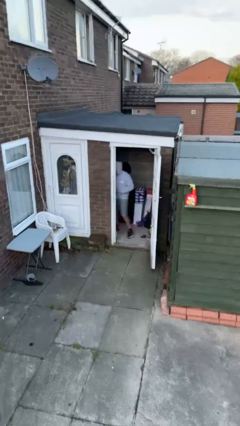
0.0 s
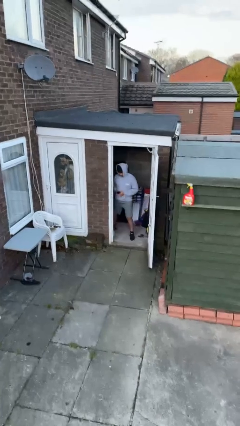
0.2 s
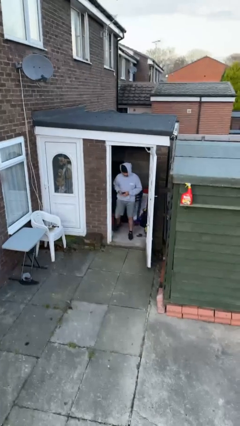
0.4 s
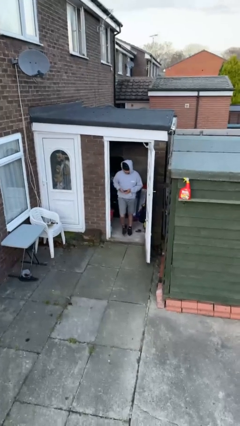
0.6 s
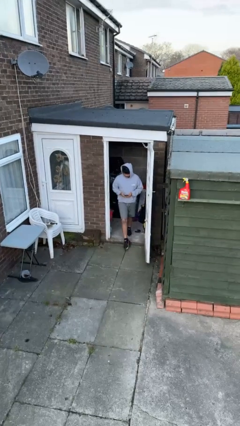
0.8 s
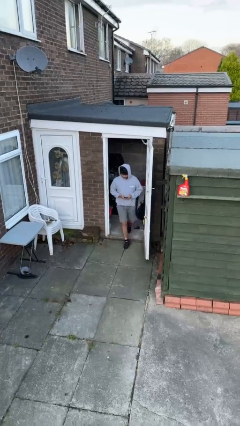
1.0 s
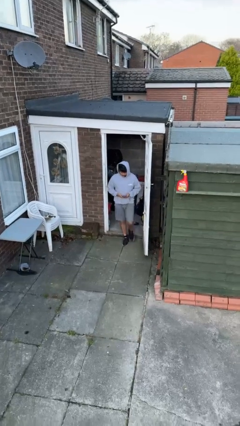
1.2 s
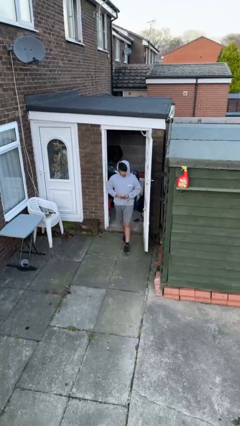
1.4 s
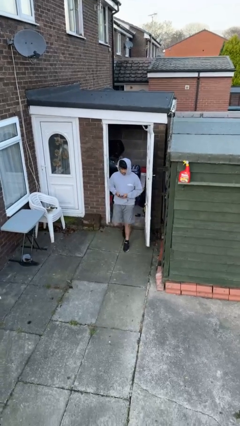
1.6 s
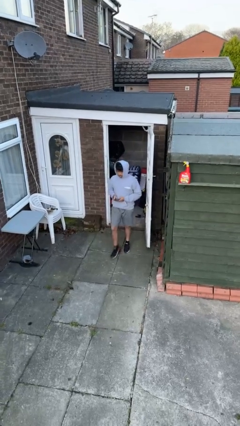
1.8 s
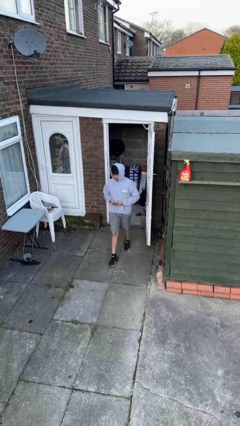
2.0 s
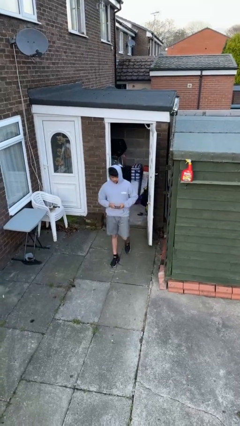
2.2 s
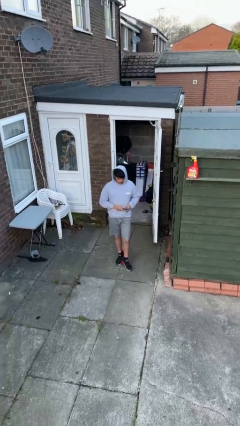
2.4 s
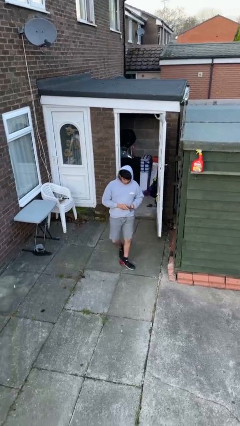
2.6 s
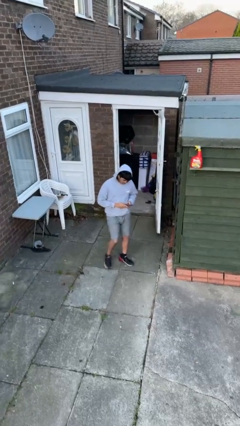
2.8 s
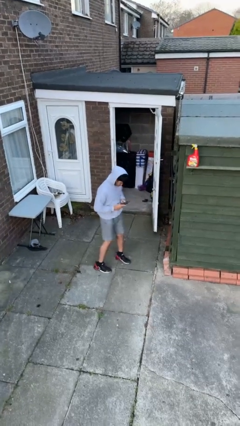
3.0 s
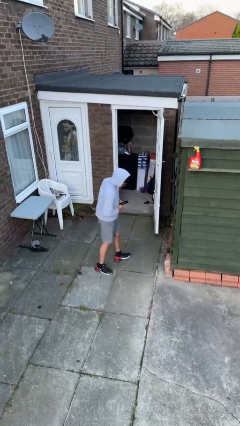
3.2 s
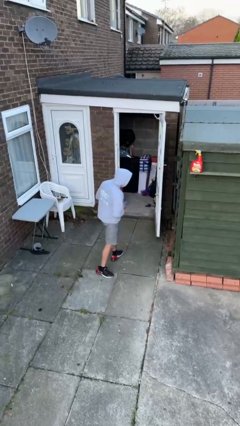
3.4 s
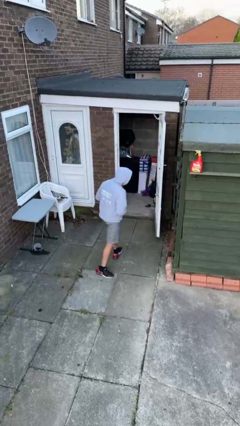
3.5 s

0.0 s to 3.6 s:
person enters scene through structure

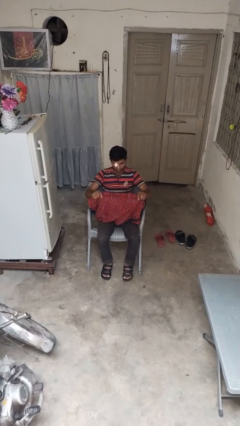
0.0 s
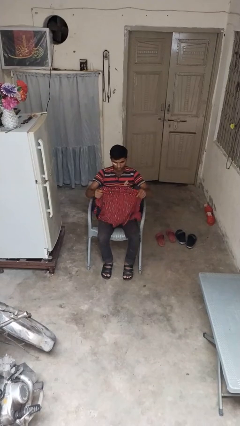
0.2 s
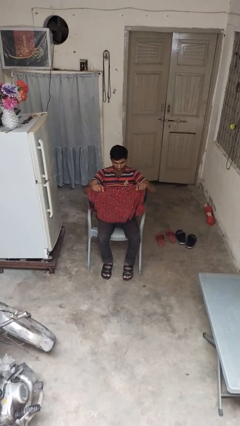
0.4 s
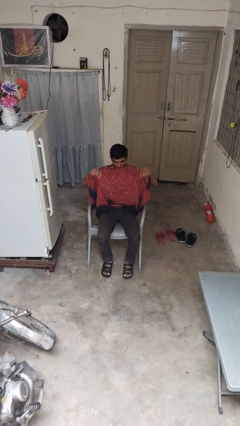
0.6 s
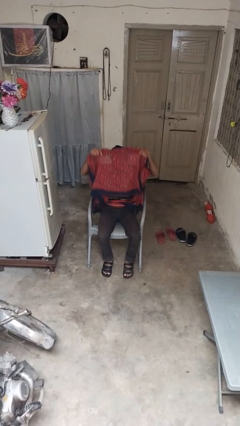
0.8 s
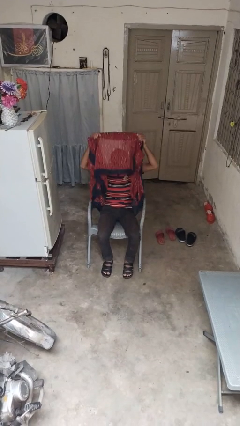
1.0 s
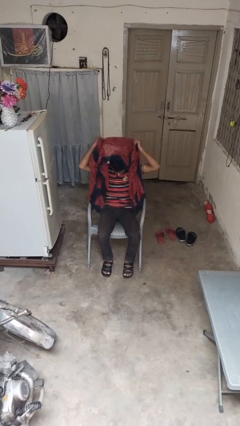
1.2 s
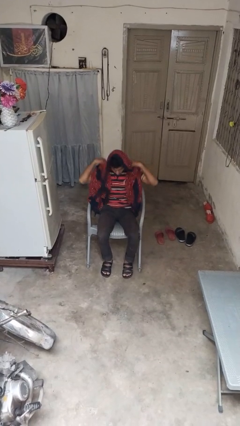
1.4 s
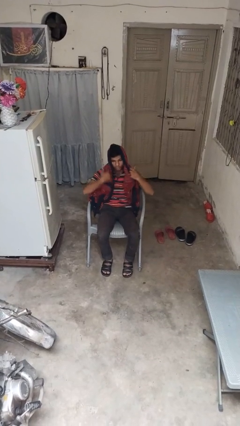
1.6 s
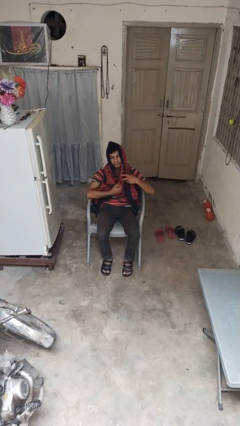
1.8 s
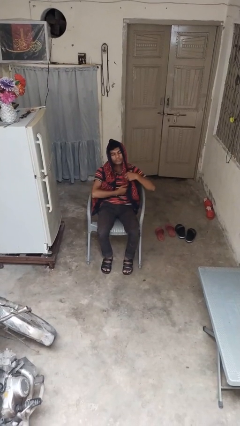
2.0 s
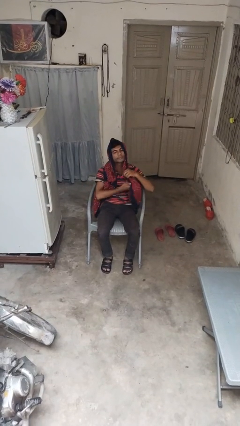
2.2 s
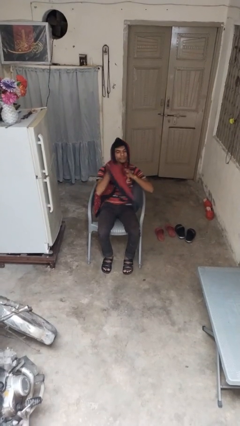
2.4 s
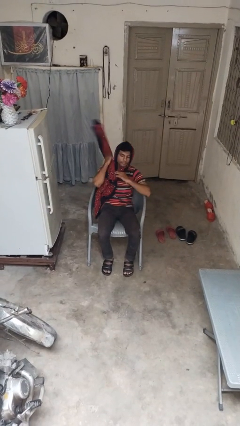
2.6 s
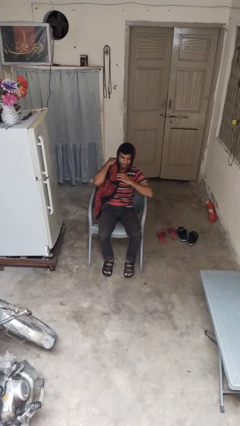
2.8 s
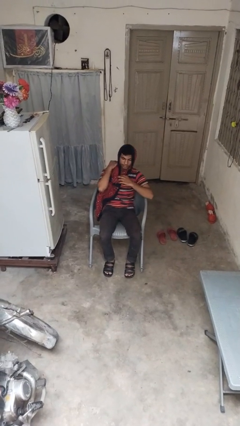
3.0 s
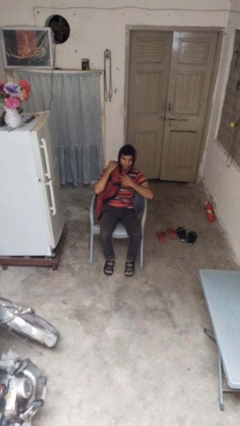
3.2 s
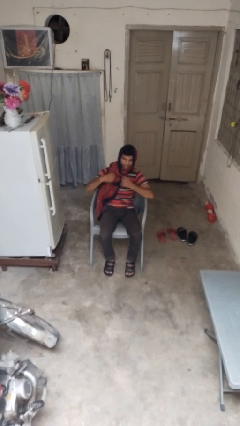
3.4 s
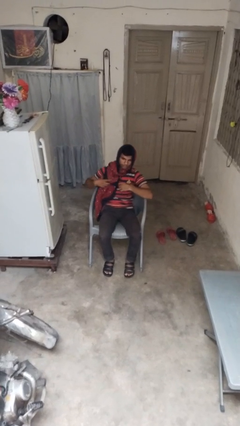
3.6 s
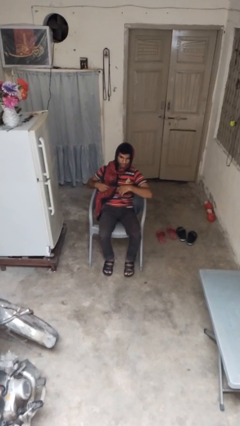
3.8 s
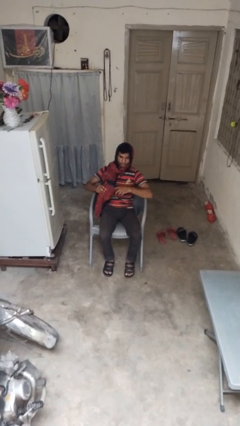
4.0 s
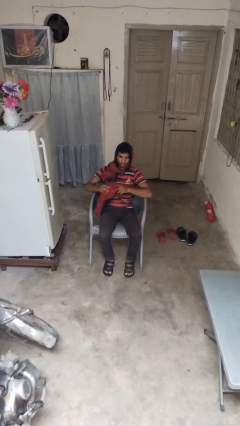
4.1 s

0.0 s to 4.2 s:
person puts on scarf

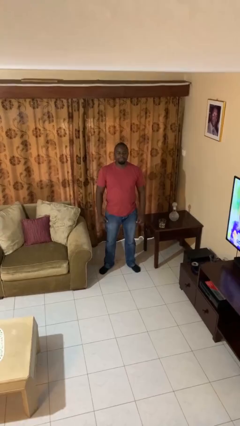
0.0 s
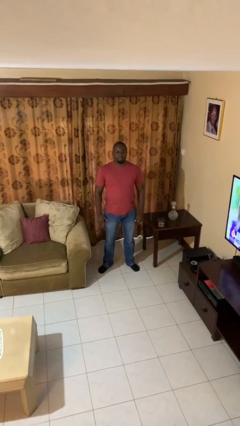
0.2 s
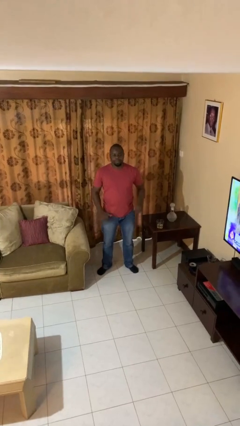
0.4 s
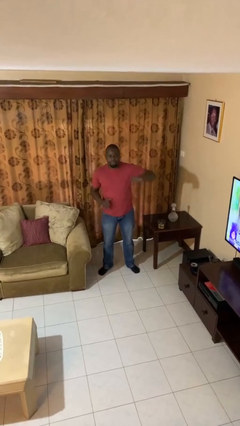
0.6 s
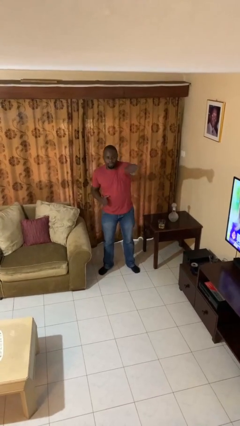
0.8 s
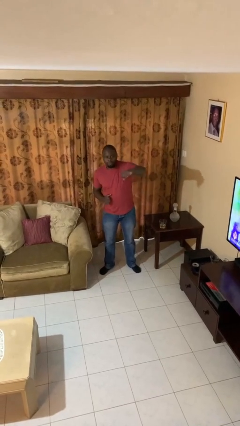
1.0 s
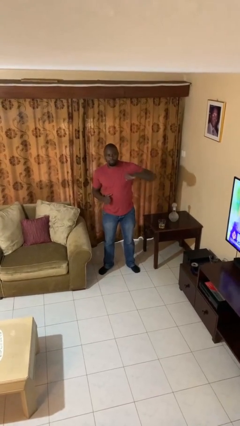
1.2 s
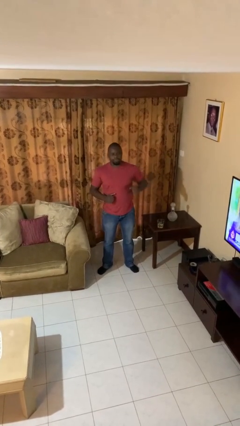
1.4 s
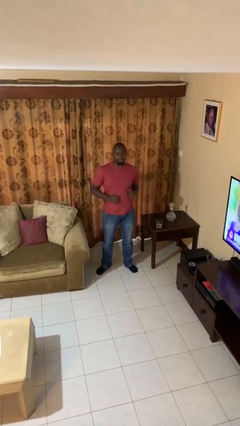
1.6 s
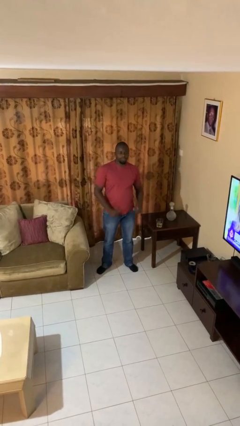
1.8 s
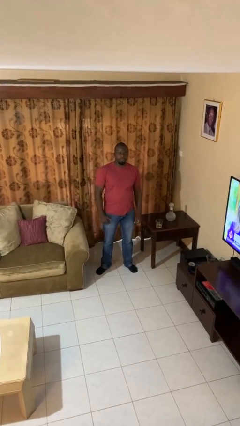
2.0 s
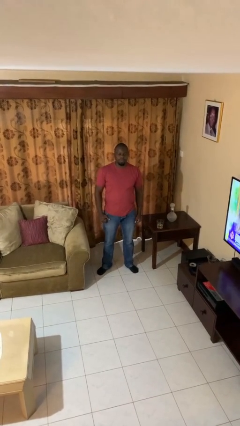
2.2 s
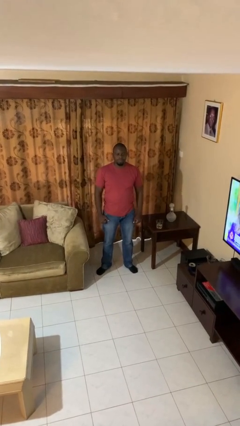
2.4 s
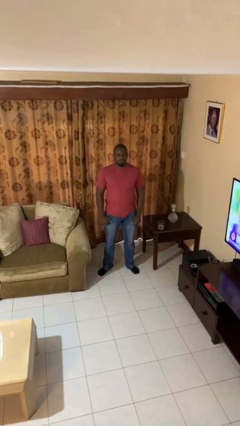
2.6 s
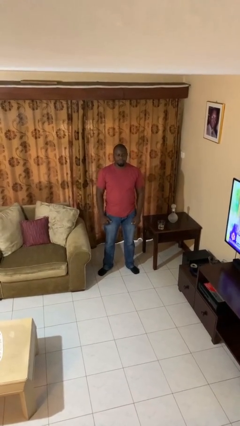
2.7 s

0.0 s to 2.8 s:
person punches

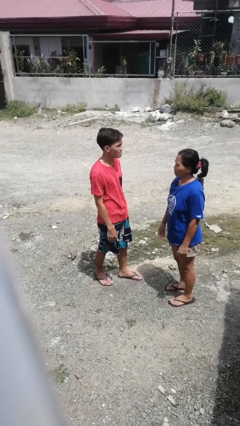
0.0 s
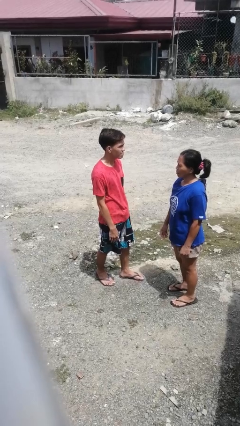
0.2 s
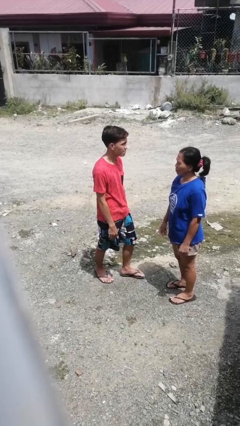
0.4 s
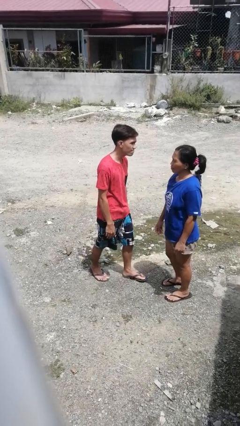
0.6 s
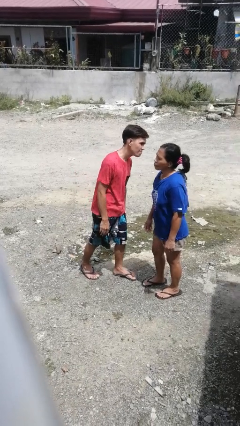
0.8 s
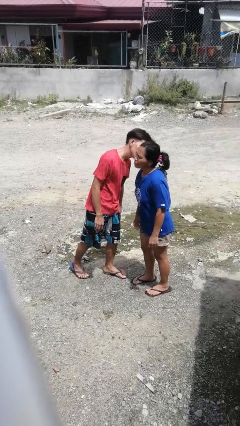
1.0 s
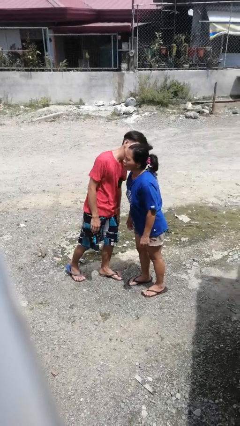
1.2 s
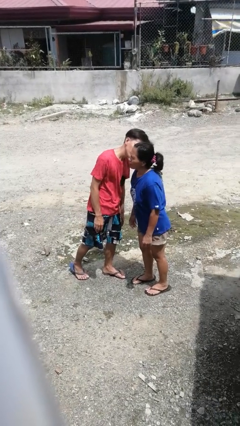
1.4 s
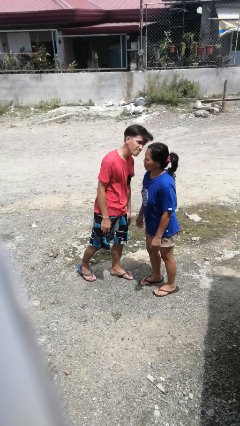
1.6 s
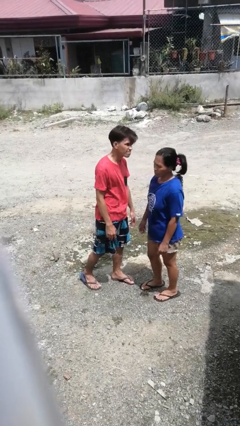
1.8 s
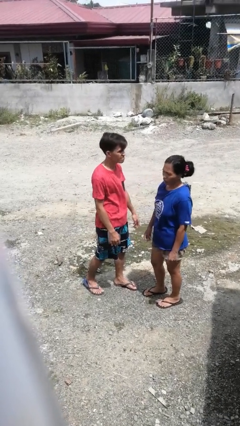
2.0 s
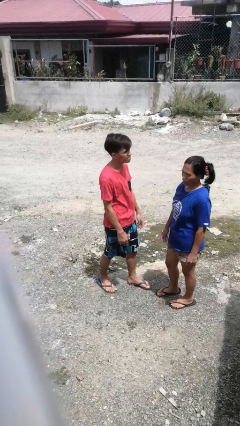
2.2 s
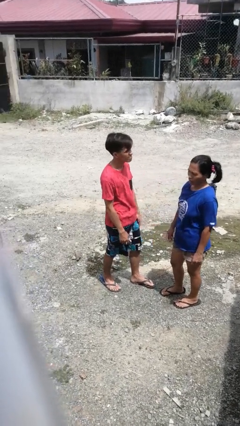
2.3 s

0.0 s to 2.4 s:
person kisses cheek of person

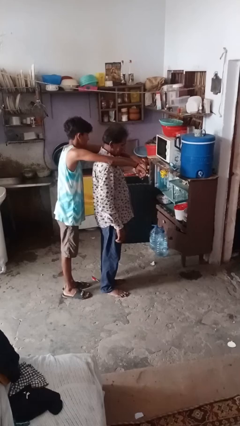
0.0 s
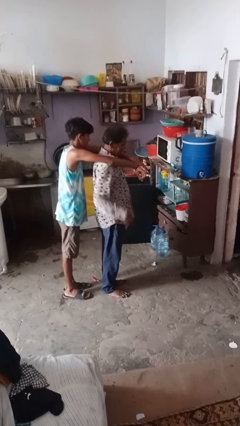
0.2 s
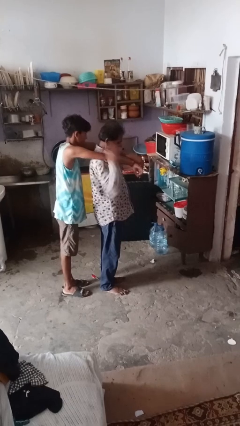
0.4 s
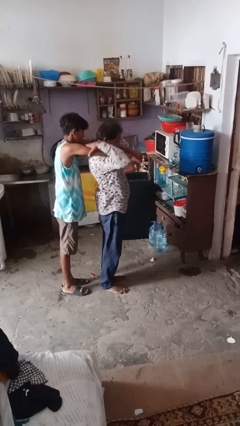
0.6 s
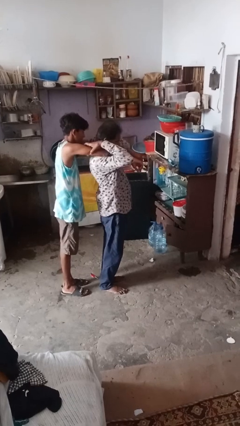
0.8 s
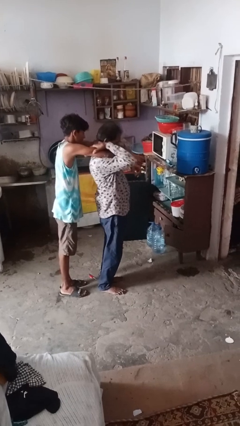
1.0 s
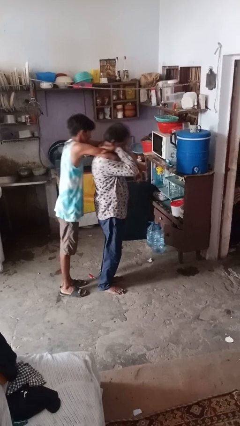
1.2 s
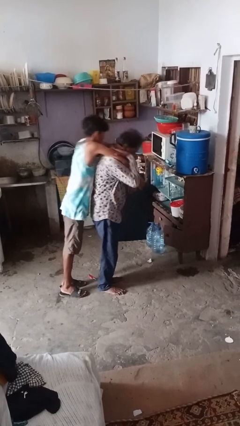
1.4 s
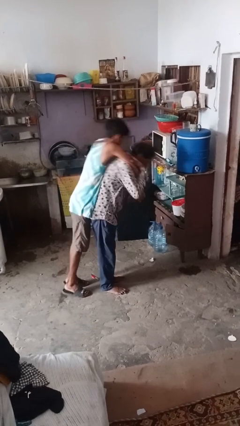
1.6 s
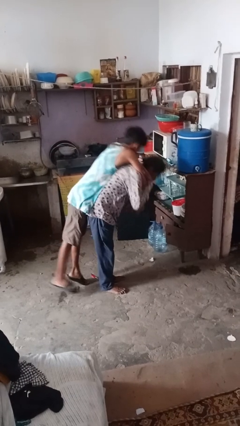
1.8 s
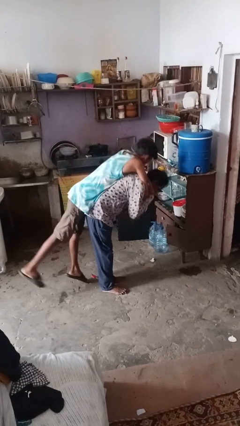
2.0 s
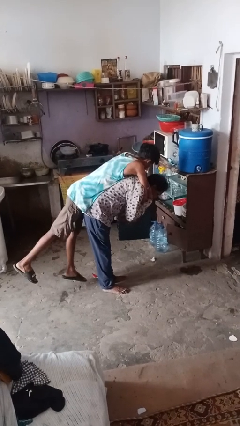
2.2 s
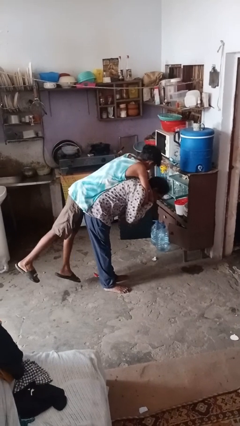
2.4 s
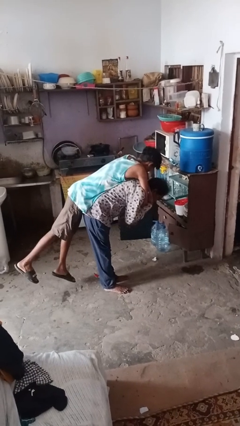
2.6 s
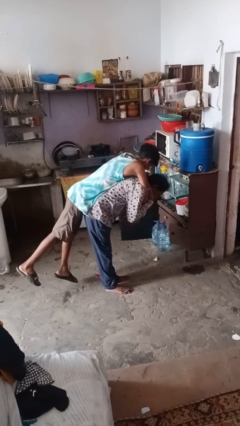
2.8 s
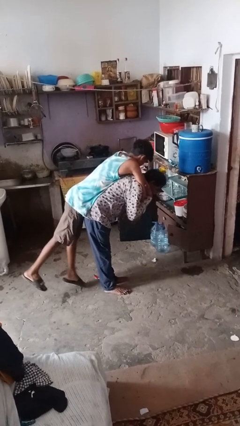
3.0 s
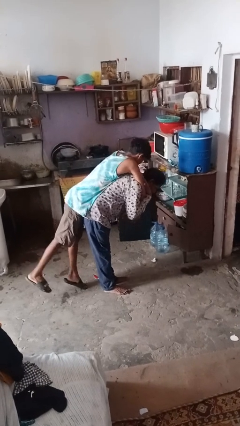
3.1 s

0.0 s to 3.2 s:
person carries person over shoulder

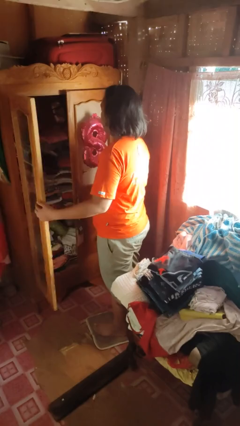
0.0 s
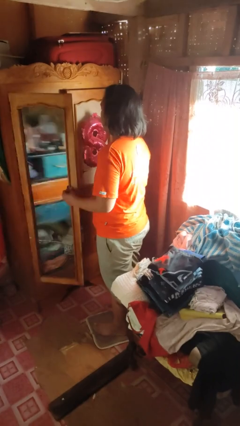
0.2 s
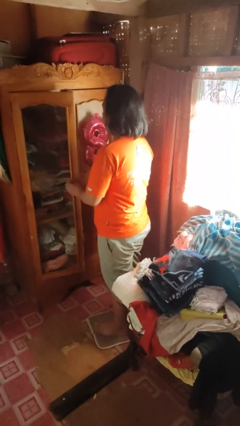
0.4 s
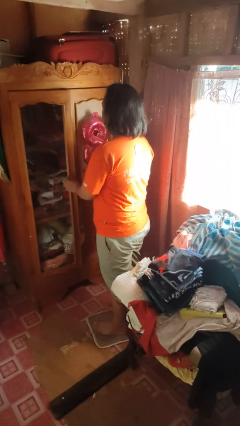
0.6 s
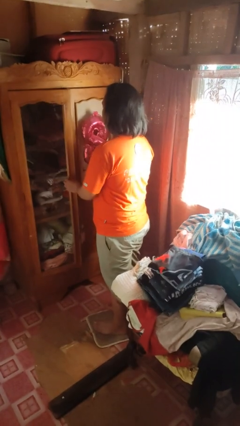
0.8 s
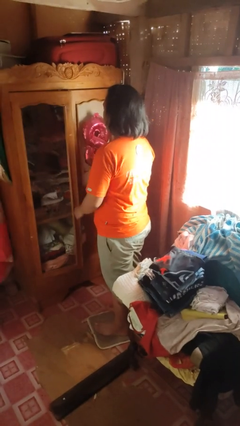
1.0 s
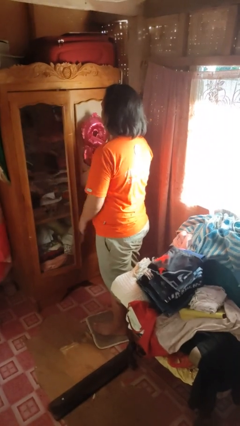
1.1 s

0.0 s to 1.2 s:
person closes dresser drawer
